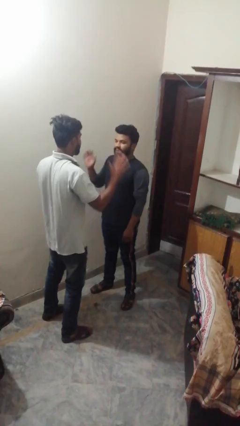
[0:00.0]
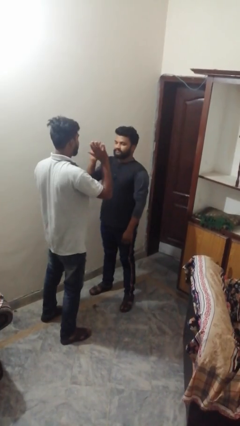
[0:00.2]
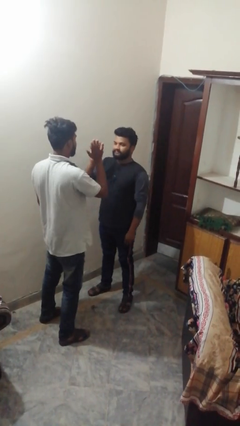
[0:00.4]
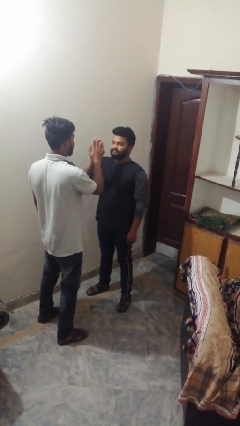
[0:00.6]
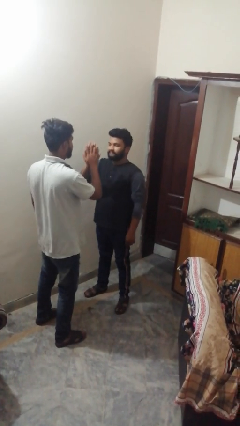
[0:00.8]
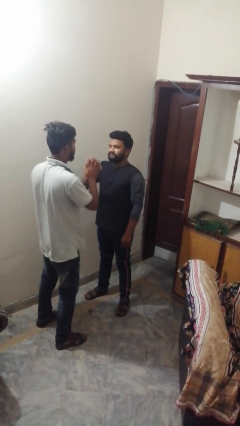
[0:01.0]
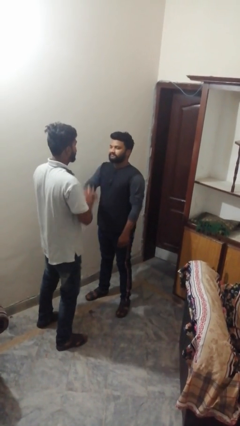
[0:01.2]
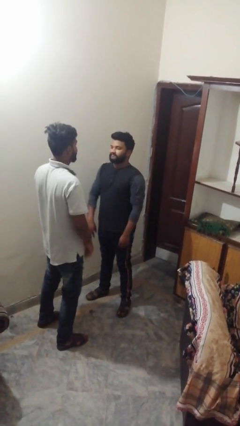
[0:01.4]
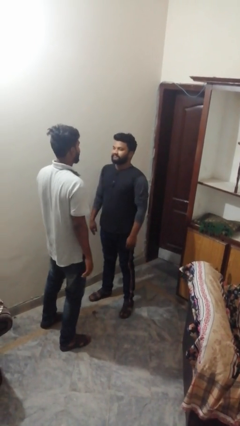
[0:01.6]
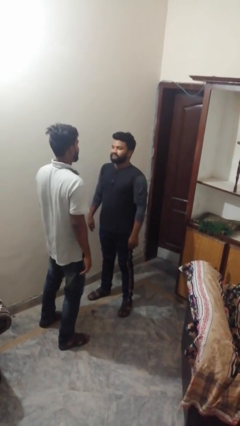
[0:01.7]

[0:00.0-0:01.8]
person highfives hand

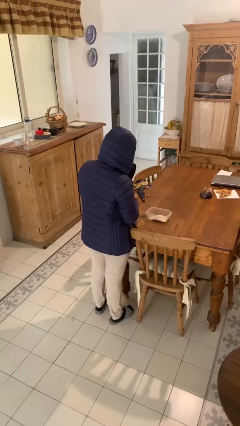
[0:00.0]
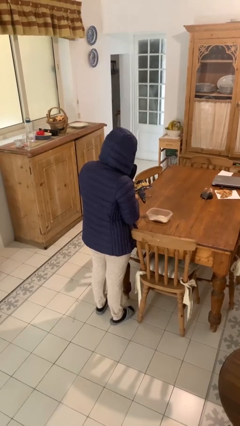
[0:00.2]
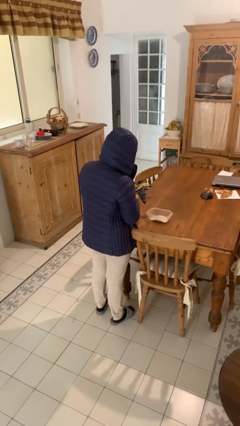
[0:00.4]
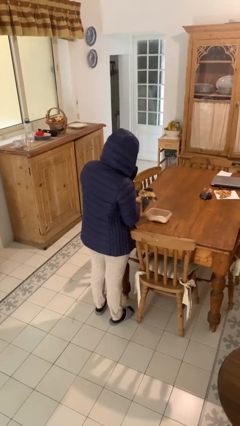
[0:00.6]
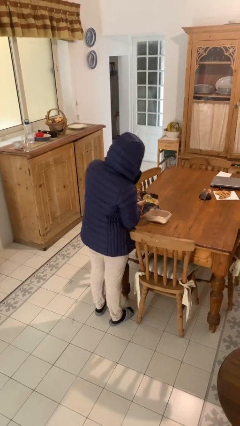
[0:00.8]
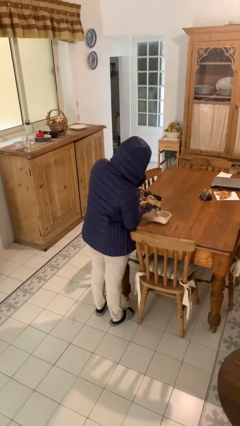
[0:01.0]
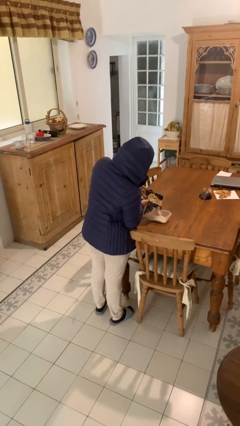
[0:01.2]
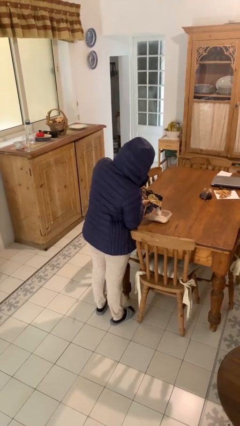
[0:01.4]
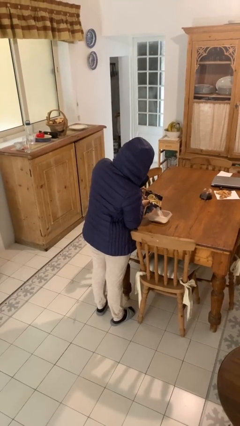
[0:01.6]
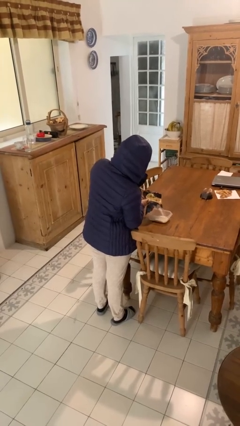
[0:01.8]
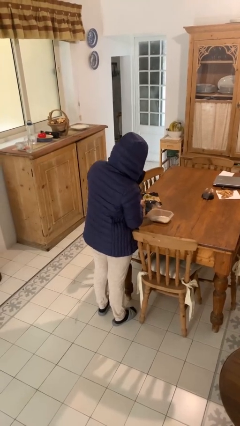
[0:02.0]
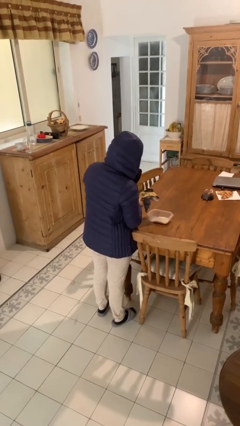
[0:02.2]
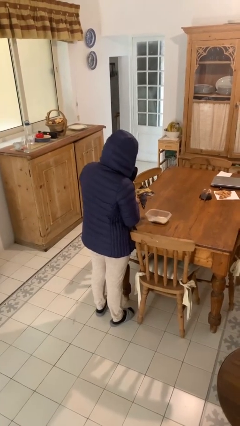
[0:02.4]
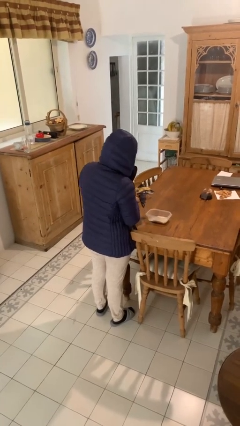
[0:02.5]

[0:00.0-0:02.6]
person pours into bowl

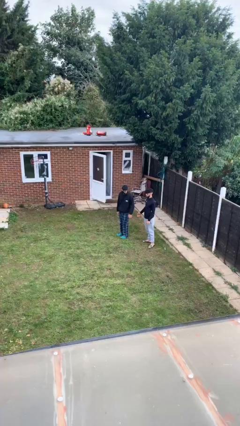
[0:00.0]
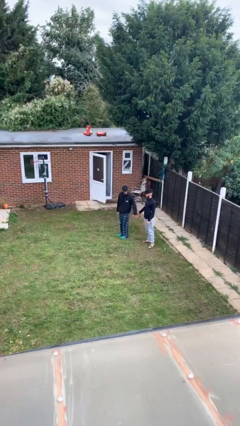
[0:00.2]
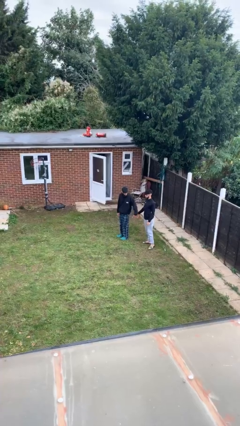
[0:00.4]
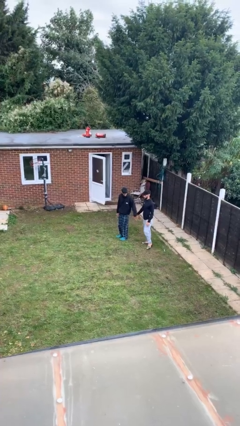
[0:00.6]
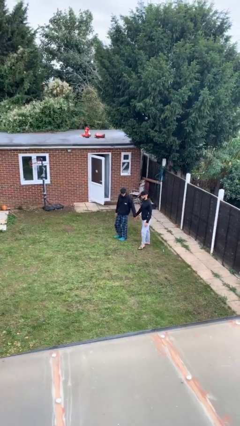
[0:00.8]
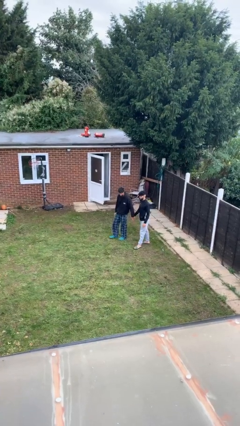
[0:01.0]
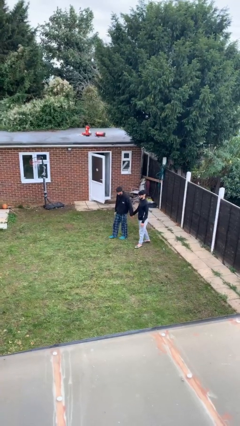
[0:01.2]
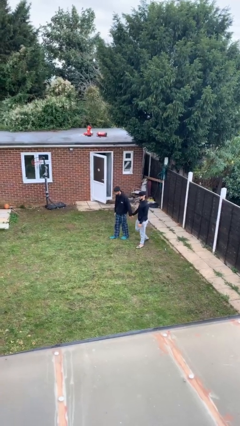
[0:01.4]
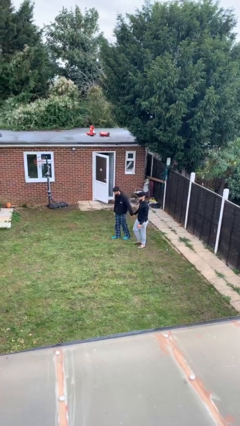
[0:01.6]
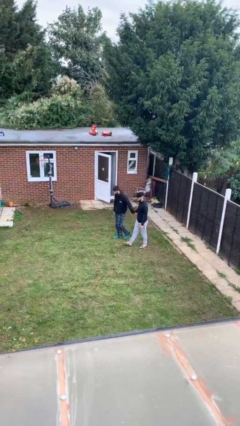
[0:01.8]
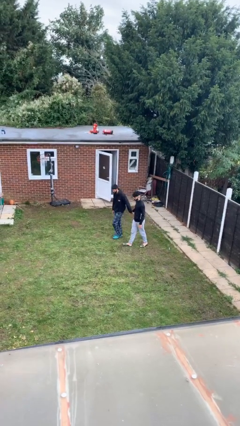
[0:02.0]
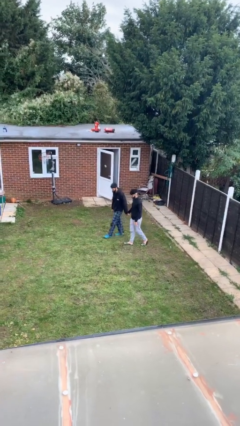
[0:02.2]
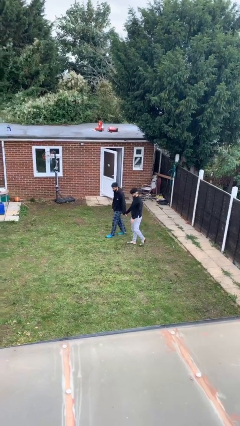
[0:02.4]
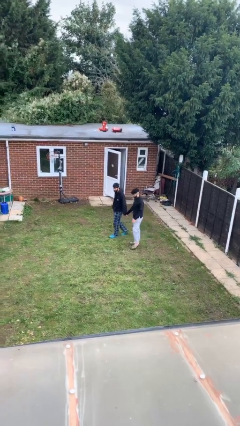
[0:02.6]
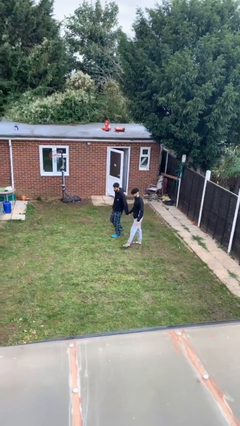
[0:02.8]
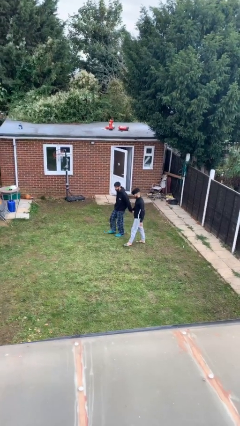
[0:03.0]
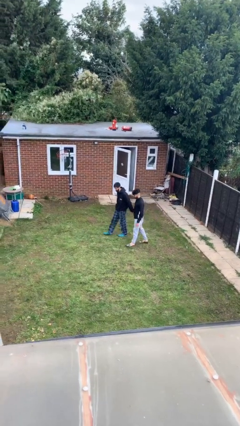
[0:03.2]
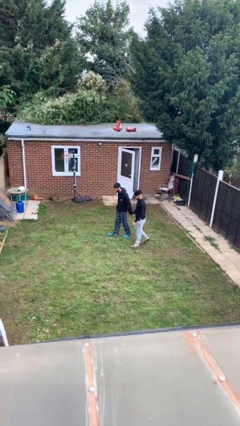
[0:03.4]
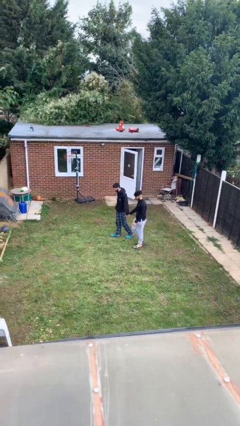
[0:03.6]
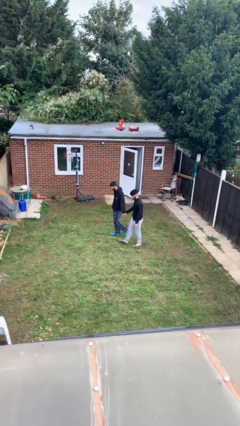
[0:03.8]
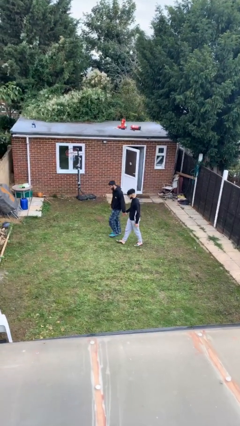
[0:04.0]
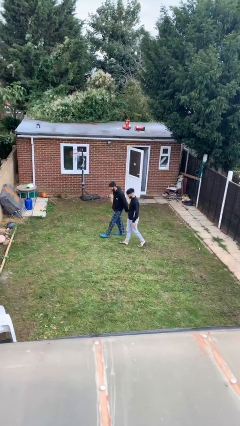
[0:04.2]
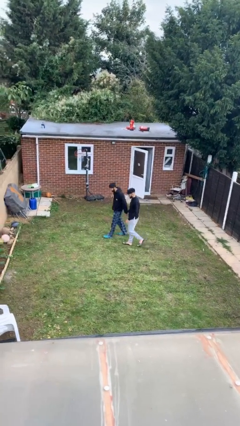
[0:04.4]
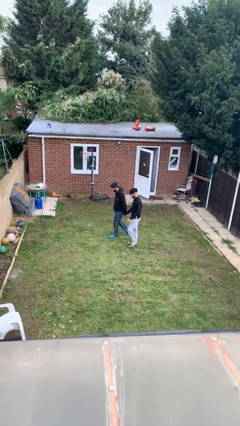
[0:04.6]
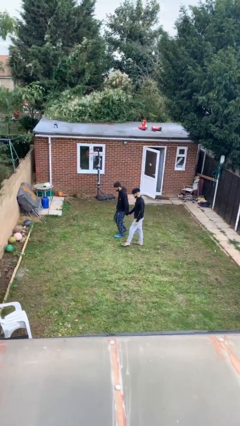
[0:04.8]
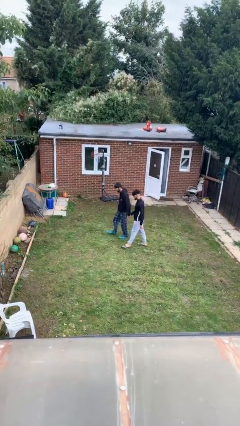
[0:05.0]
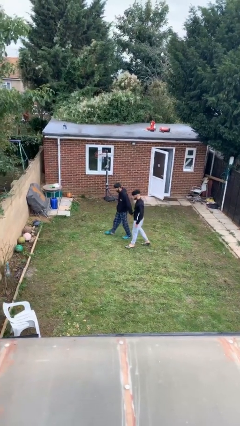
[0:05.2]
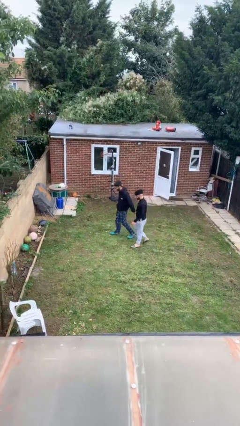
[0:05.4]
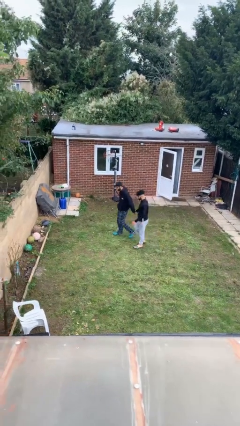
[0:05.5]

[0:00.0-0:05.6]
person holds hand

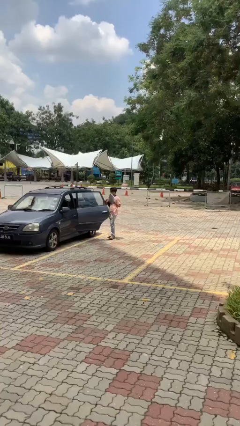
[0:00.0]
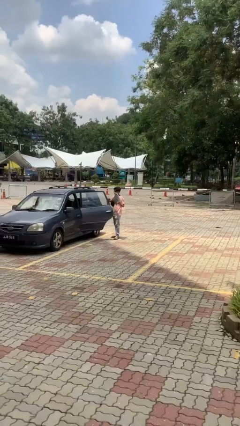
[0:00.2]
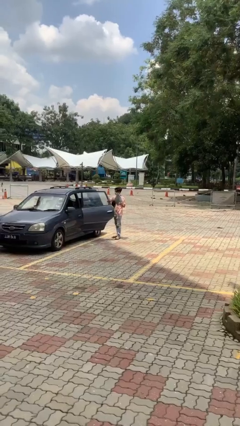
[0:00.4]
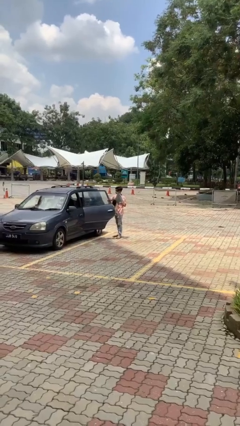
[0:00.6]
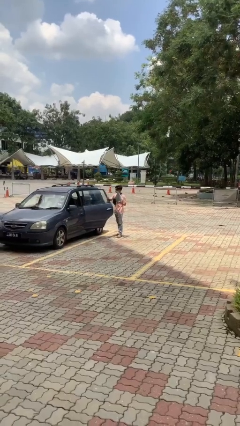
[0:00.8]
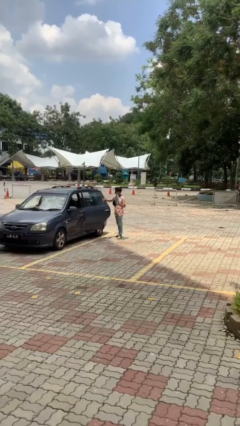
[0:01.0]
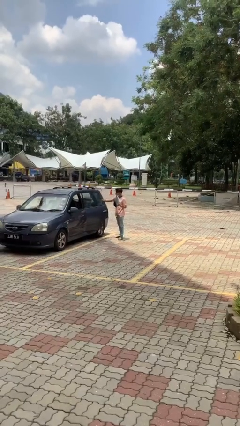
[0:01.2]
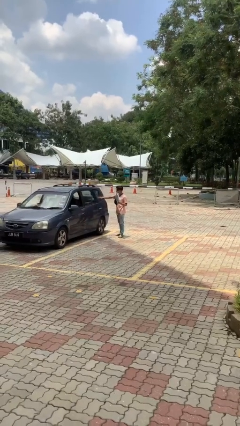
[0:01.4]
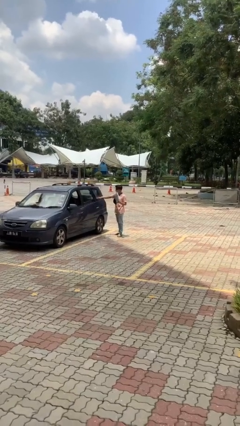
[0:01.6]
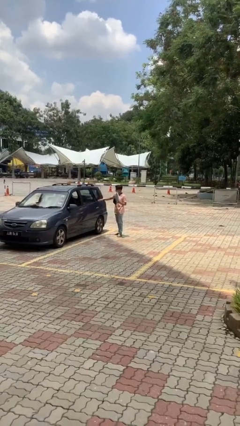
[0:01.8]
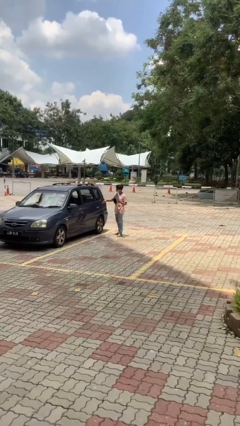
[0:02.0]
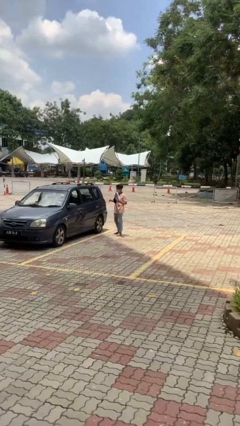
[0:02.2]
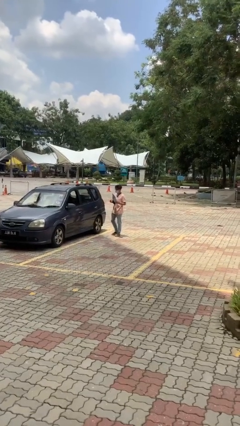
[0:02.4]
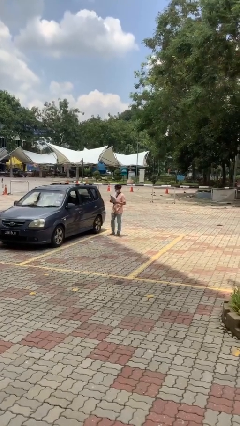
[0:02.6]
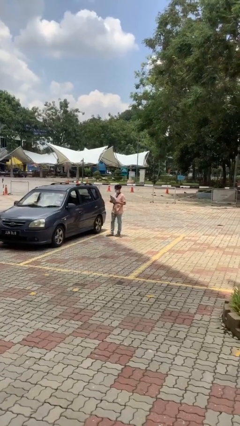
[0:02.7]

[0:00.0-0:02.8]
person closes car door

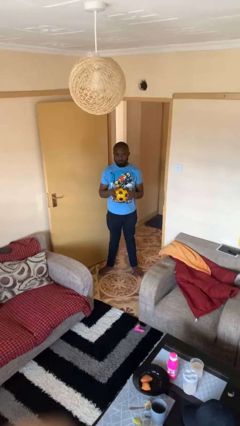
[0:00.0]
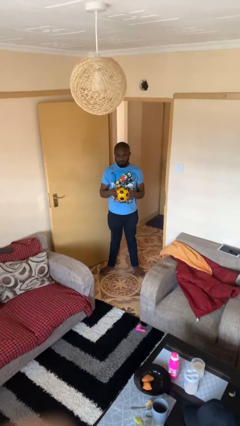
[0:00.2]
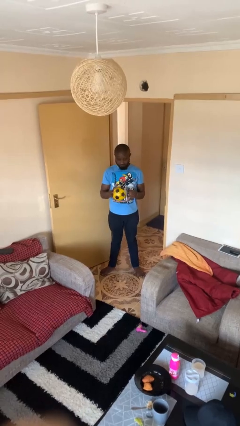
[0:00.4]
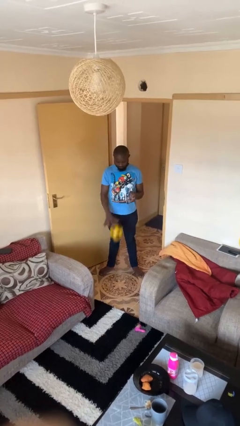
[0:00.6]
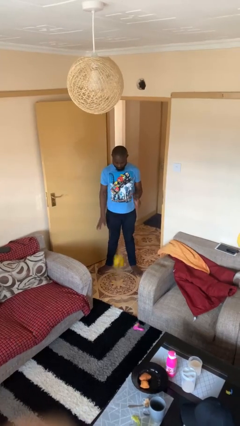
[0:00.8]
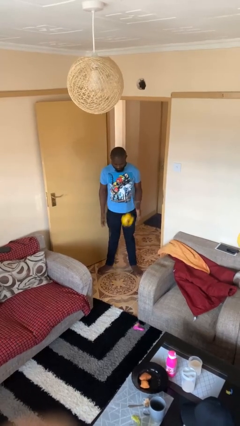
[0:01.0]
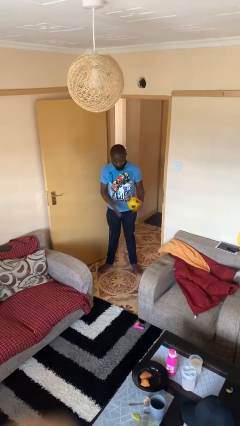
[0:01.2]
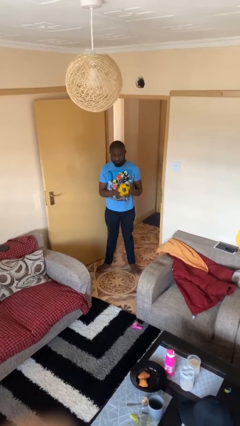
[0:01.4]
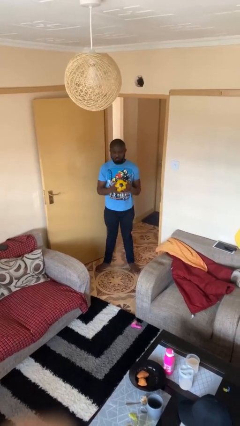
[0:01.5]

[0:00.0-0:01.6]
person bounces ball on floor

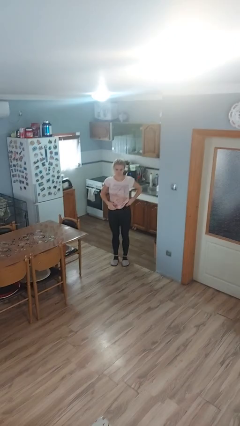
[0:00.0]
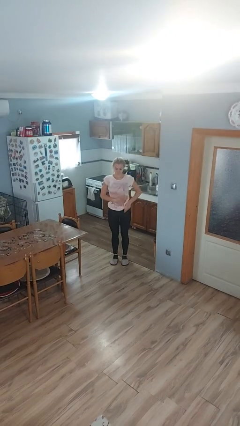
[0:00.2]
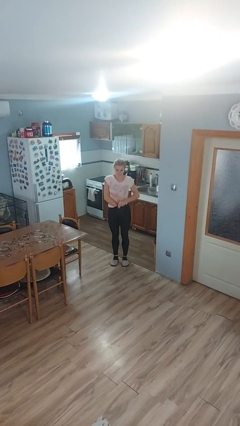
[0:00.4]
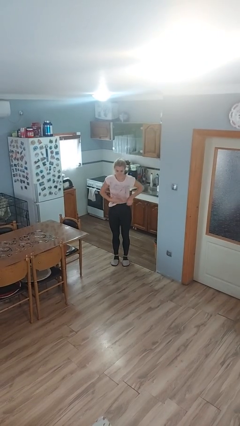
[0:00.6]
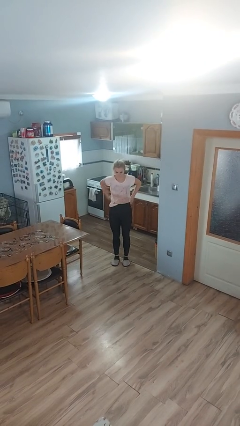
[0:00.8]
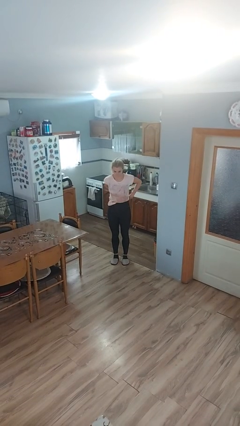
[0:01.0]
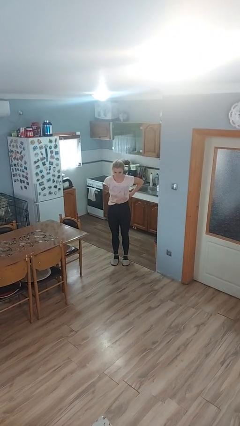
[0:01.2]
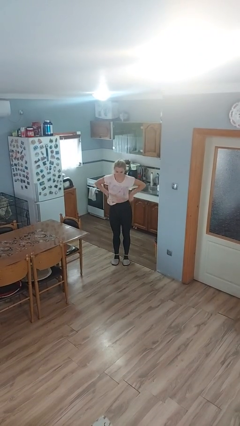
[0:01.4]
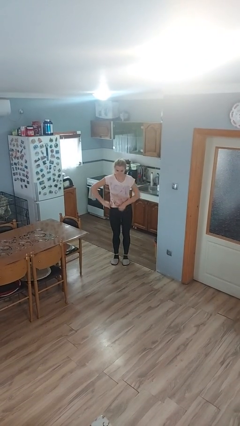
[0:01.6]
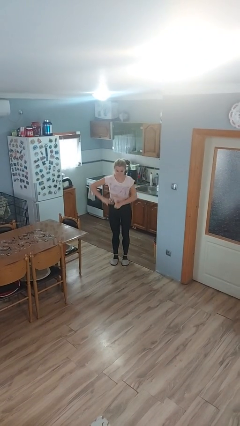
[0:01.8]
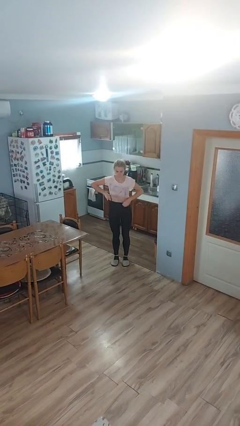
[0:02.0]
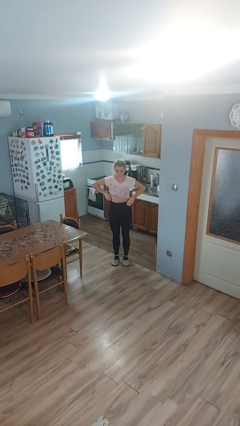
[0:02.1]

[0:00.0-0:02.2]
person tucks in shirt

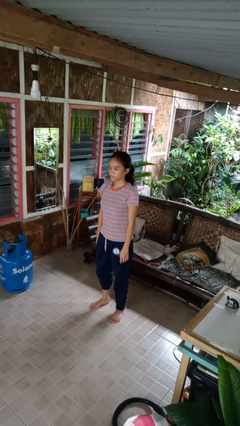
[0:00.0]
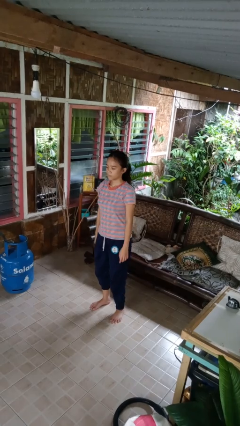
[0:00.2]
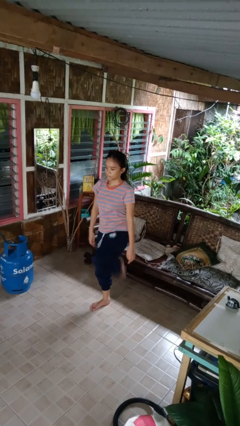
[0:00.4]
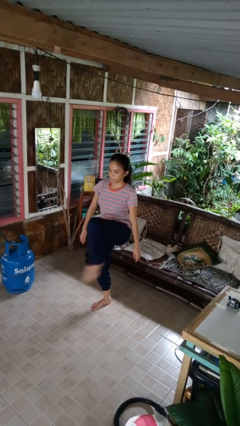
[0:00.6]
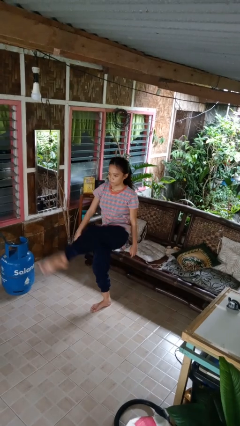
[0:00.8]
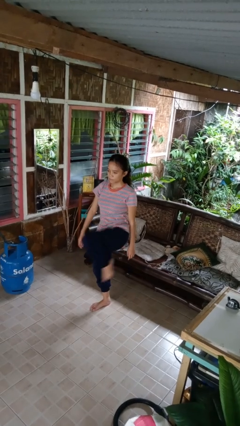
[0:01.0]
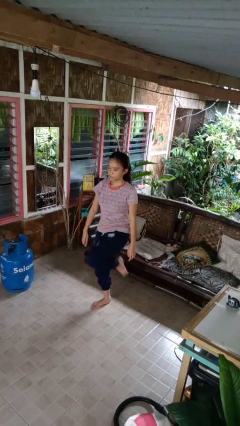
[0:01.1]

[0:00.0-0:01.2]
person karate kicks
